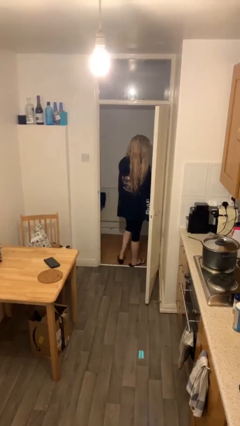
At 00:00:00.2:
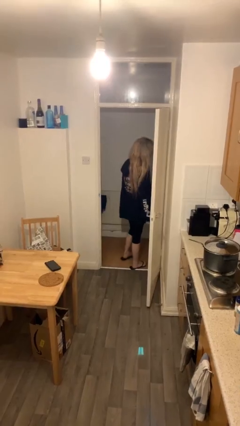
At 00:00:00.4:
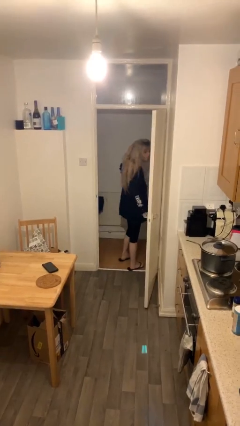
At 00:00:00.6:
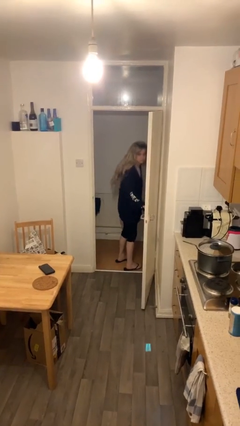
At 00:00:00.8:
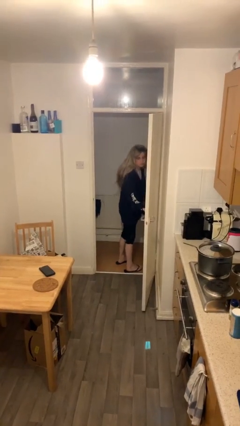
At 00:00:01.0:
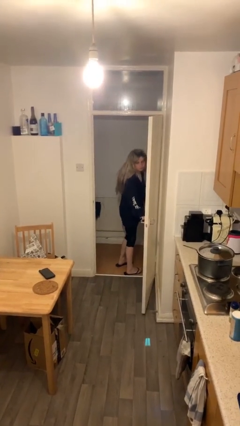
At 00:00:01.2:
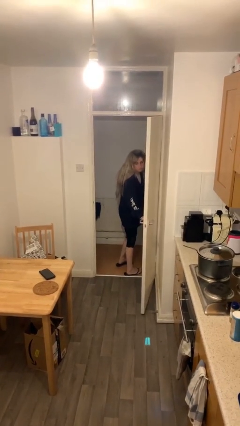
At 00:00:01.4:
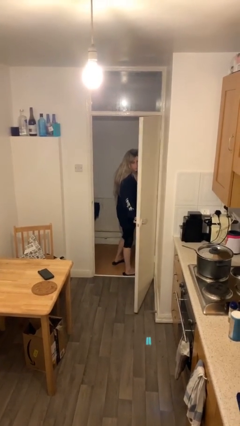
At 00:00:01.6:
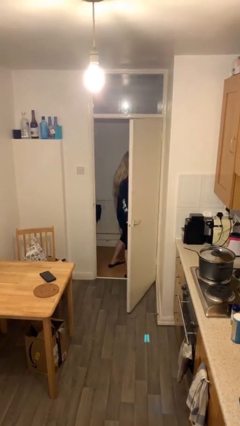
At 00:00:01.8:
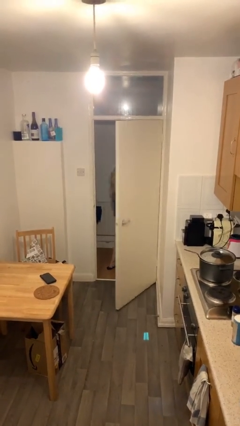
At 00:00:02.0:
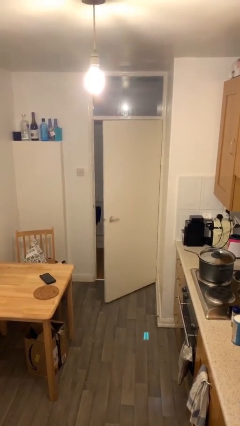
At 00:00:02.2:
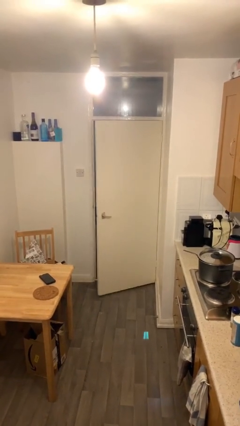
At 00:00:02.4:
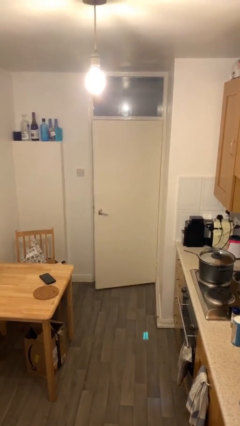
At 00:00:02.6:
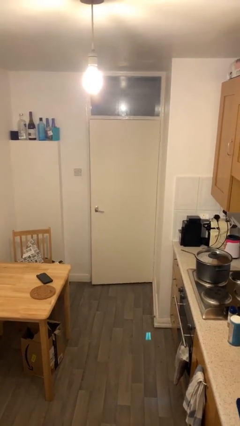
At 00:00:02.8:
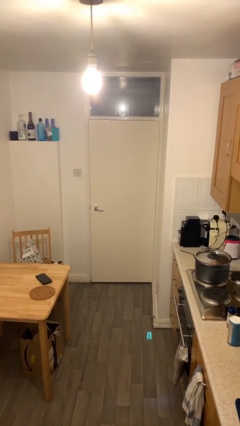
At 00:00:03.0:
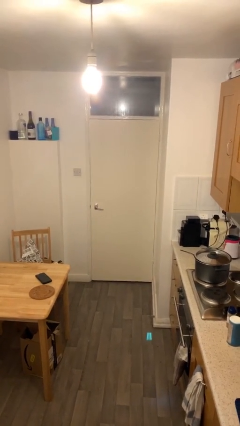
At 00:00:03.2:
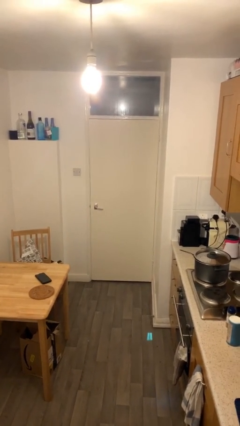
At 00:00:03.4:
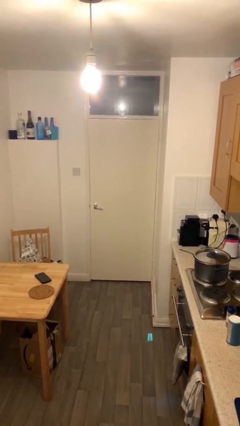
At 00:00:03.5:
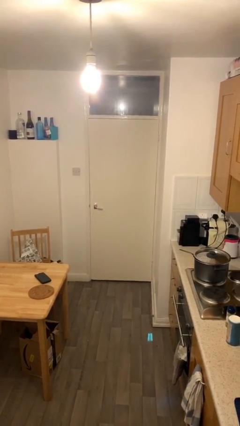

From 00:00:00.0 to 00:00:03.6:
person closes facility door

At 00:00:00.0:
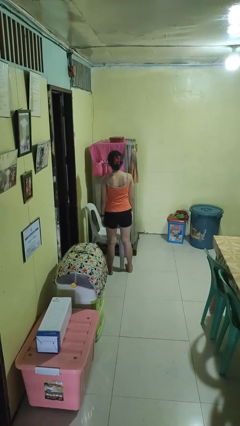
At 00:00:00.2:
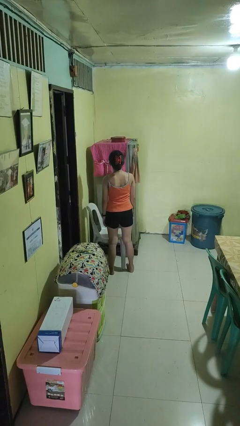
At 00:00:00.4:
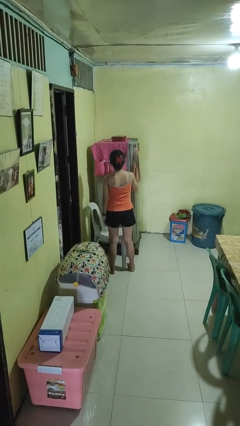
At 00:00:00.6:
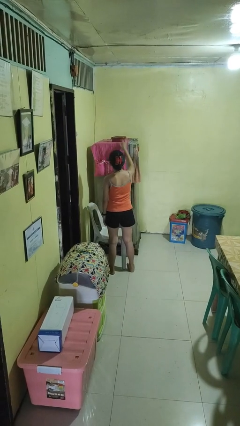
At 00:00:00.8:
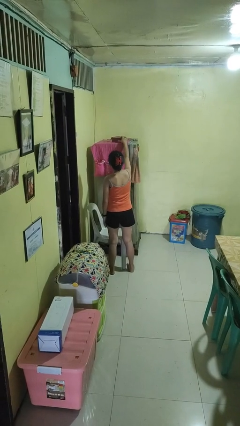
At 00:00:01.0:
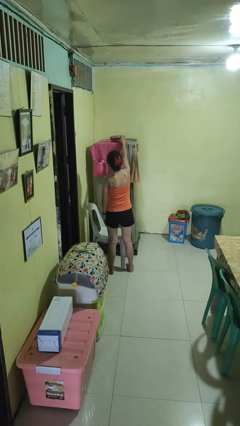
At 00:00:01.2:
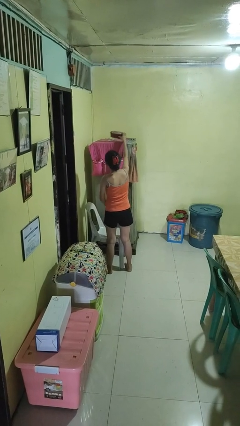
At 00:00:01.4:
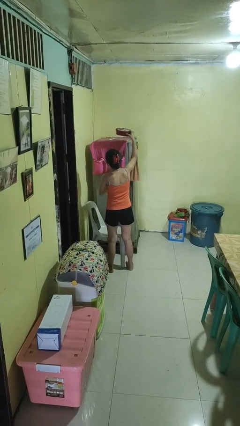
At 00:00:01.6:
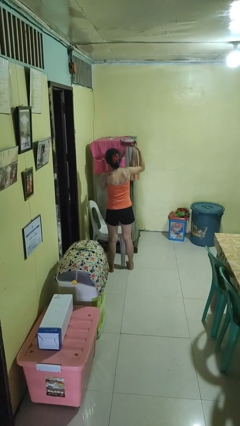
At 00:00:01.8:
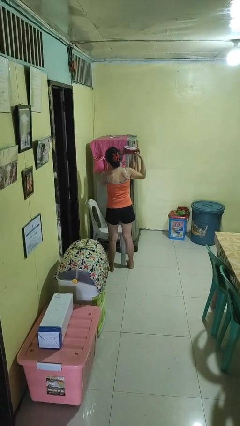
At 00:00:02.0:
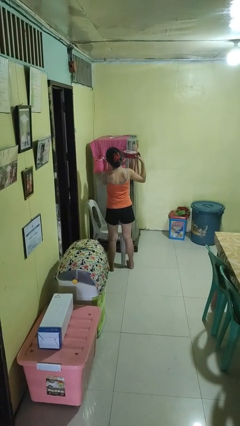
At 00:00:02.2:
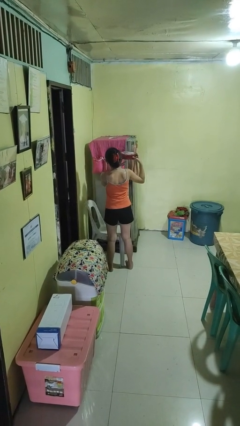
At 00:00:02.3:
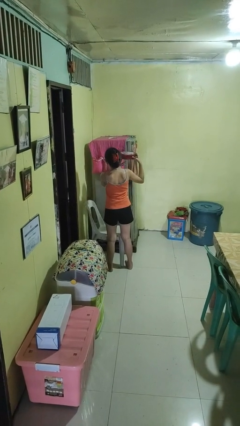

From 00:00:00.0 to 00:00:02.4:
person picks up object from shelf

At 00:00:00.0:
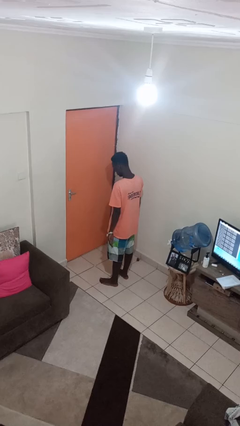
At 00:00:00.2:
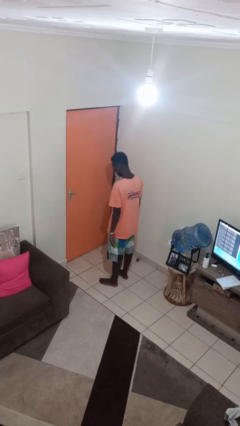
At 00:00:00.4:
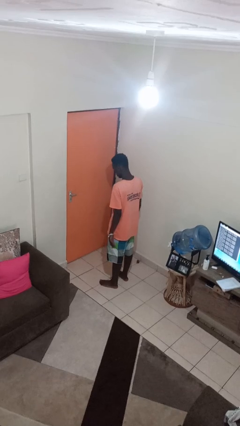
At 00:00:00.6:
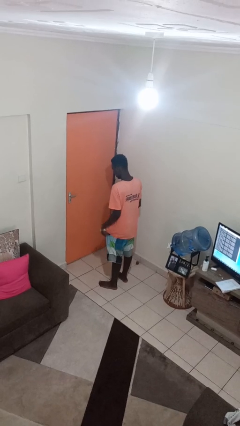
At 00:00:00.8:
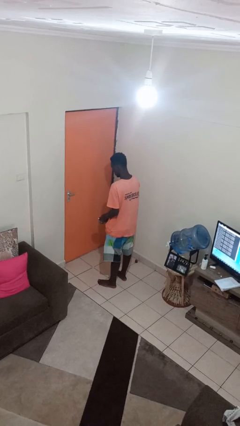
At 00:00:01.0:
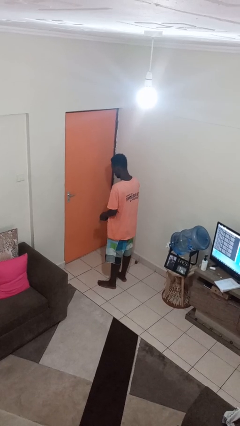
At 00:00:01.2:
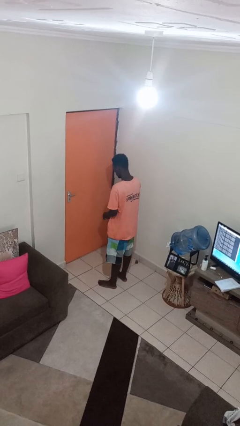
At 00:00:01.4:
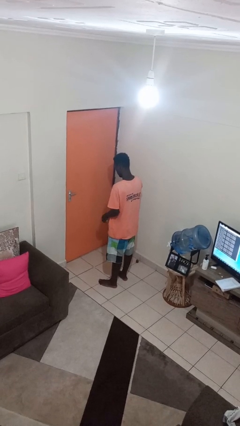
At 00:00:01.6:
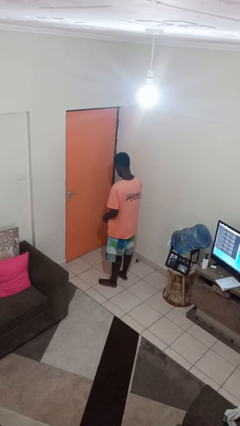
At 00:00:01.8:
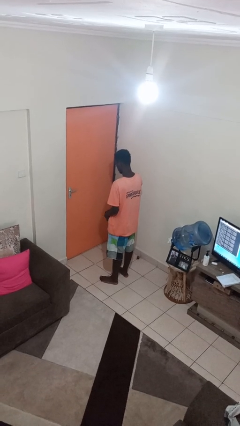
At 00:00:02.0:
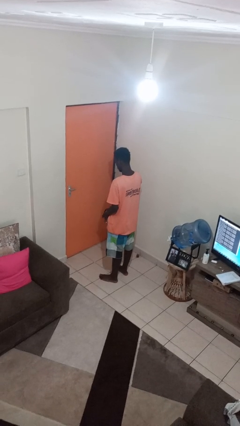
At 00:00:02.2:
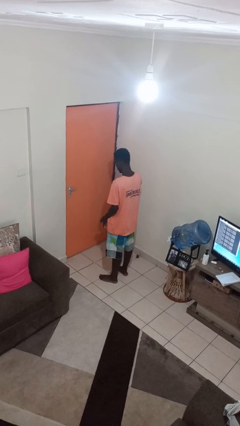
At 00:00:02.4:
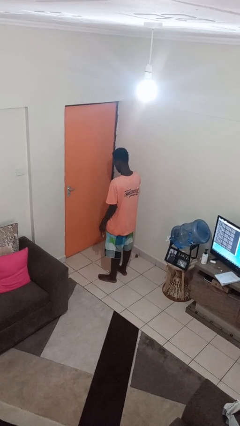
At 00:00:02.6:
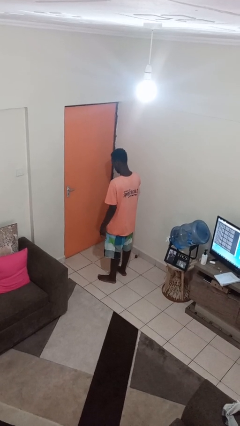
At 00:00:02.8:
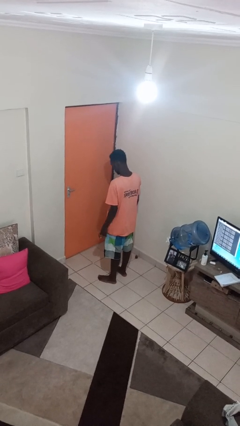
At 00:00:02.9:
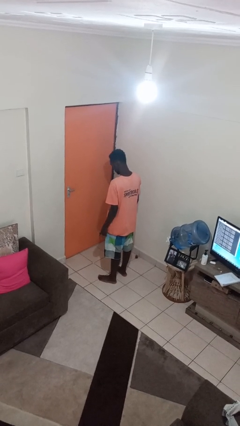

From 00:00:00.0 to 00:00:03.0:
person takes off wristwatch

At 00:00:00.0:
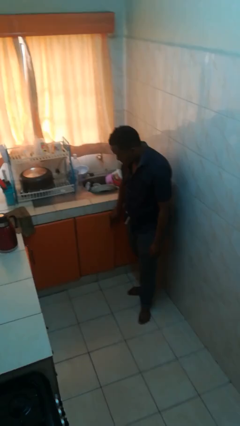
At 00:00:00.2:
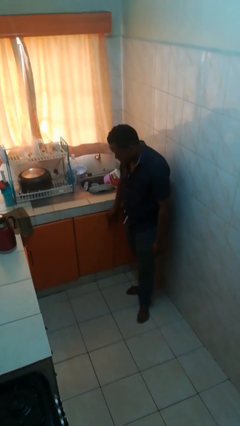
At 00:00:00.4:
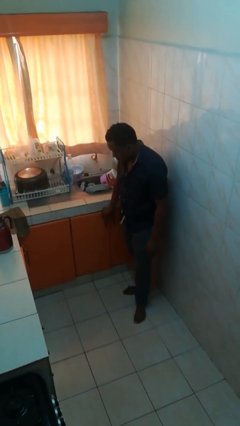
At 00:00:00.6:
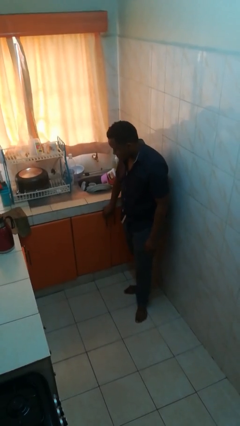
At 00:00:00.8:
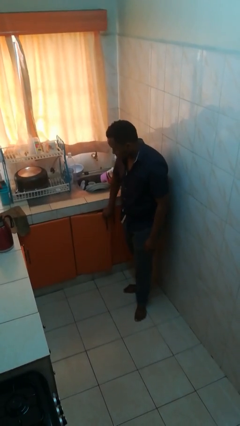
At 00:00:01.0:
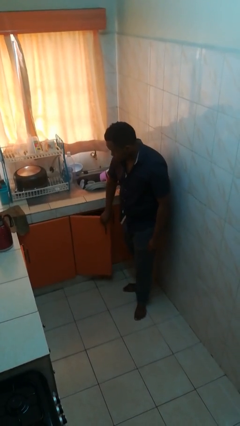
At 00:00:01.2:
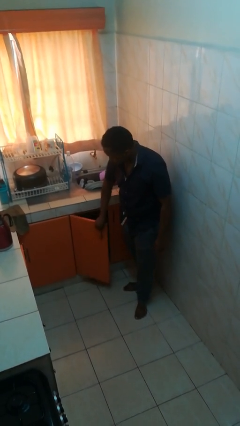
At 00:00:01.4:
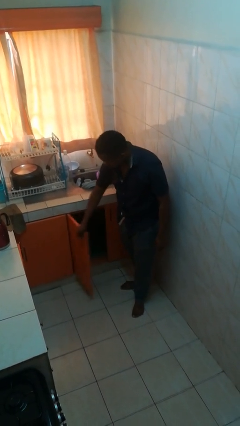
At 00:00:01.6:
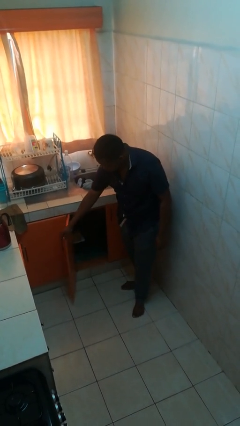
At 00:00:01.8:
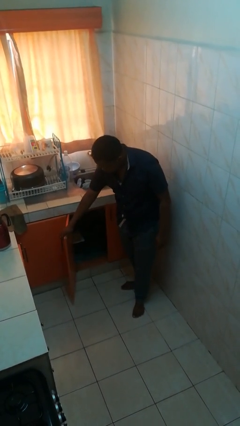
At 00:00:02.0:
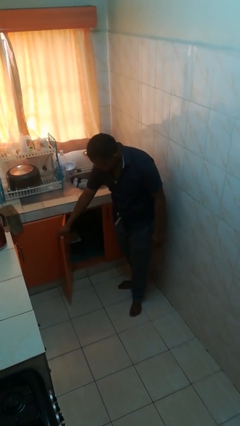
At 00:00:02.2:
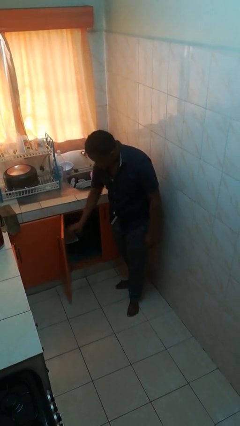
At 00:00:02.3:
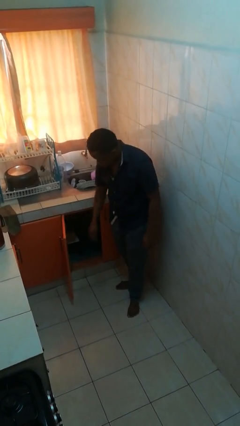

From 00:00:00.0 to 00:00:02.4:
person opens cabinet

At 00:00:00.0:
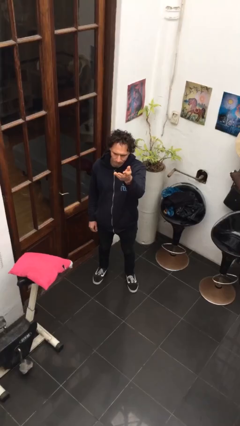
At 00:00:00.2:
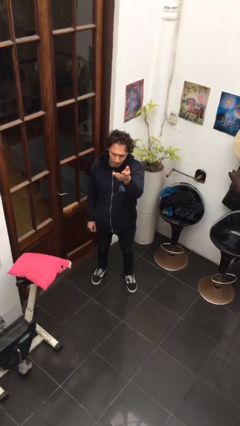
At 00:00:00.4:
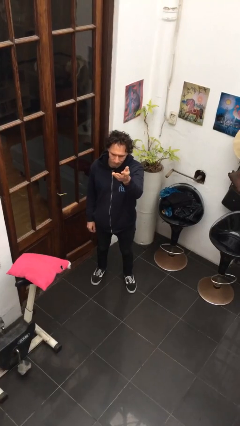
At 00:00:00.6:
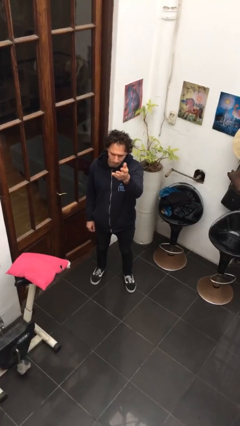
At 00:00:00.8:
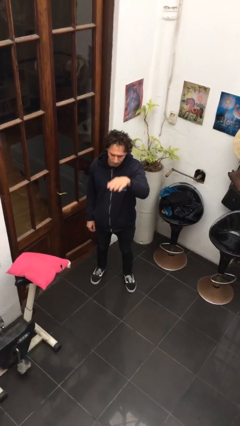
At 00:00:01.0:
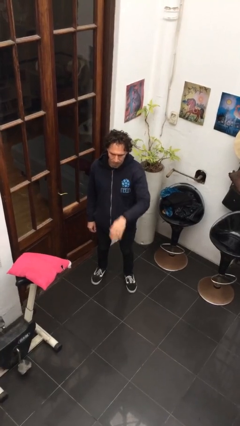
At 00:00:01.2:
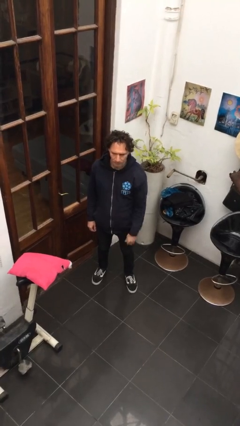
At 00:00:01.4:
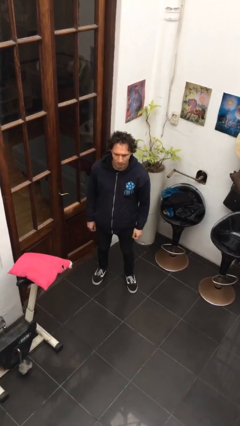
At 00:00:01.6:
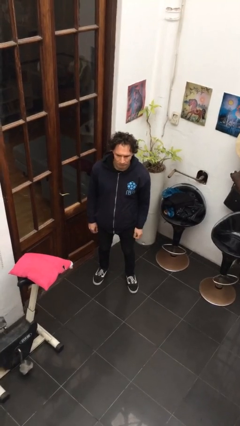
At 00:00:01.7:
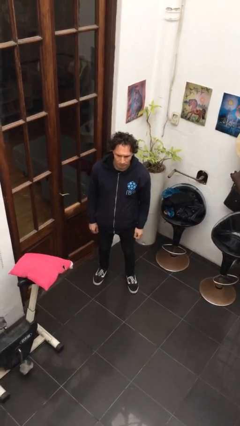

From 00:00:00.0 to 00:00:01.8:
person gestures swipe down

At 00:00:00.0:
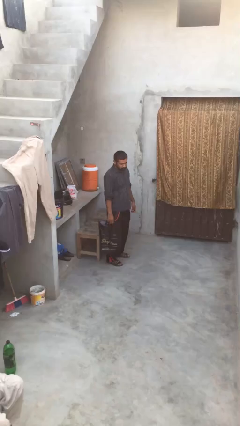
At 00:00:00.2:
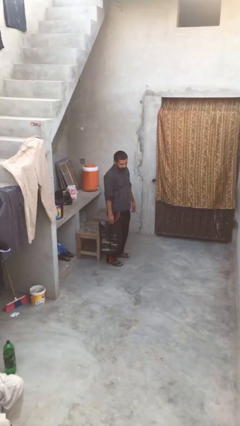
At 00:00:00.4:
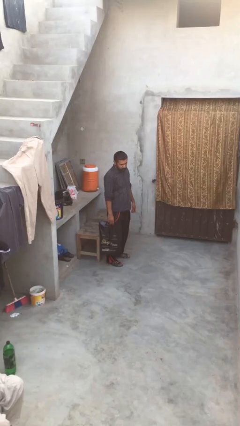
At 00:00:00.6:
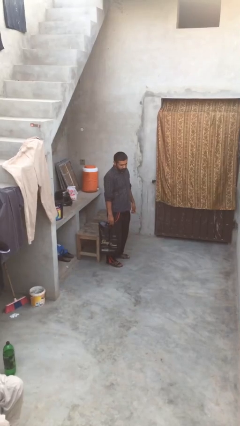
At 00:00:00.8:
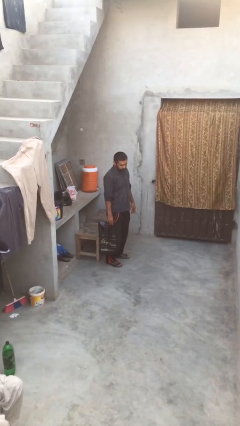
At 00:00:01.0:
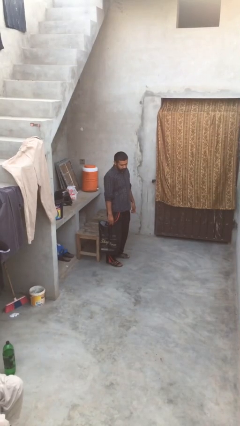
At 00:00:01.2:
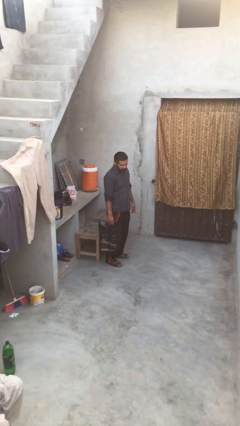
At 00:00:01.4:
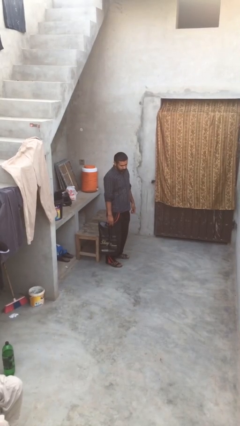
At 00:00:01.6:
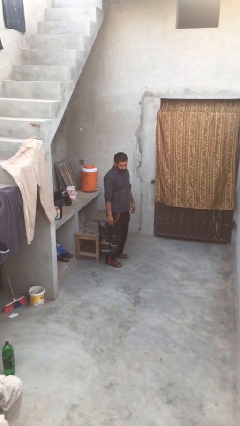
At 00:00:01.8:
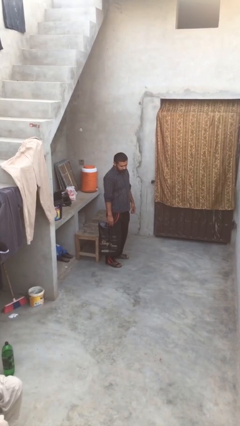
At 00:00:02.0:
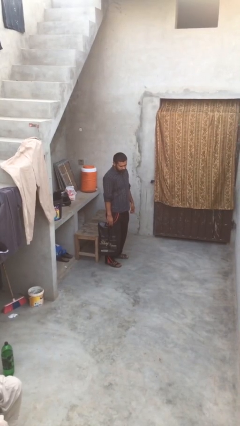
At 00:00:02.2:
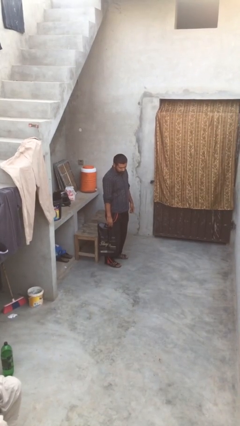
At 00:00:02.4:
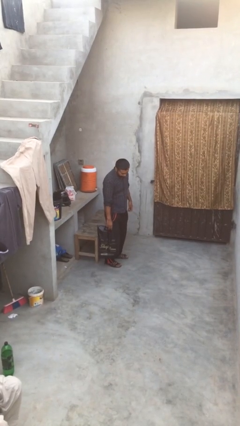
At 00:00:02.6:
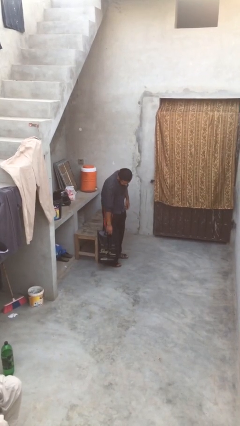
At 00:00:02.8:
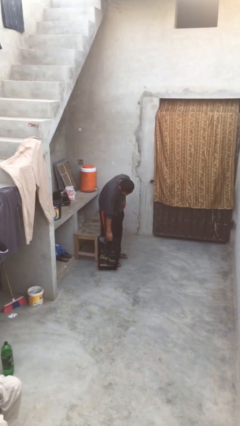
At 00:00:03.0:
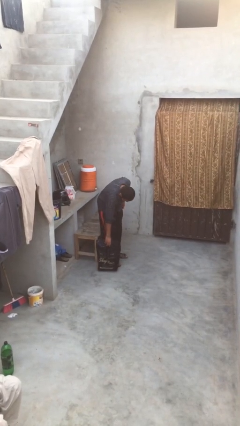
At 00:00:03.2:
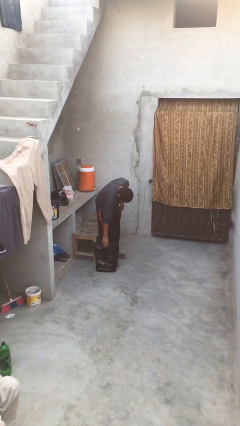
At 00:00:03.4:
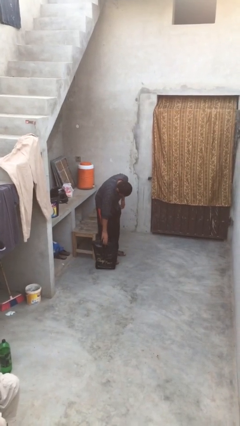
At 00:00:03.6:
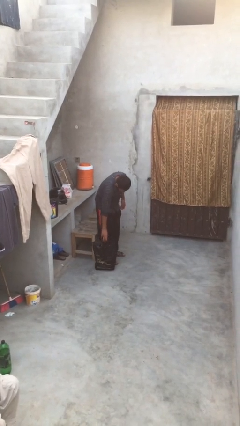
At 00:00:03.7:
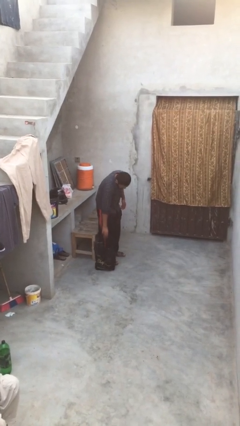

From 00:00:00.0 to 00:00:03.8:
person puts down object on floor
